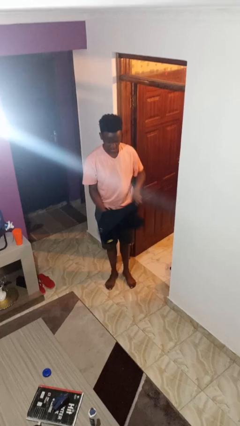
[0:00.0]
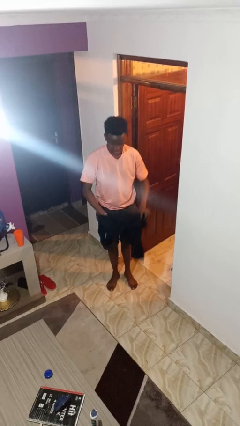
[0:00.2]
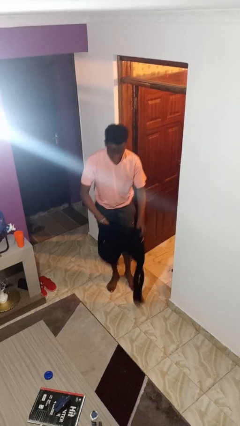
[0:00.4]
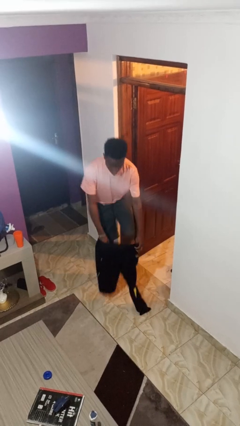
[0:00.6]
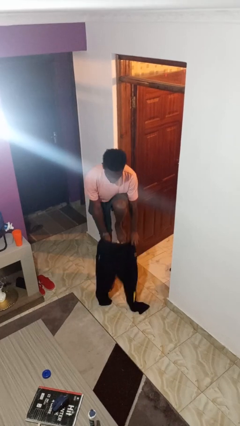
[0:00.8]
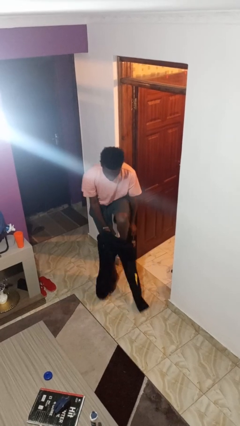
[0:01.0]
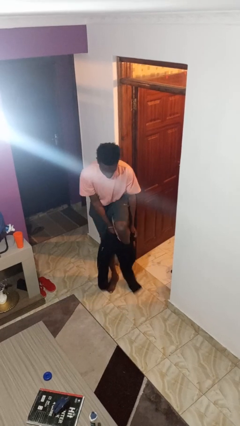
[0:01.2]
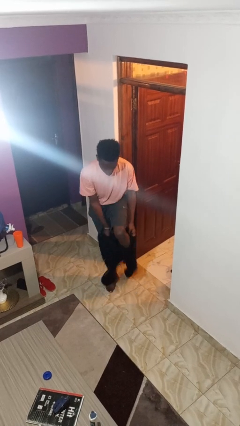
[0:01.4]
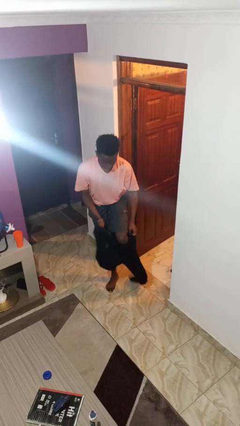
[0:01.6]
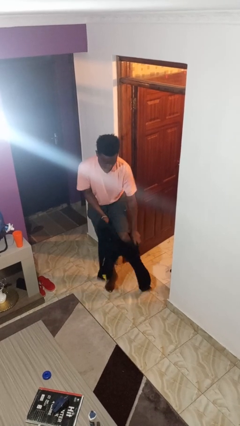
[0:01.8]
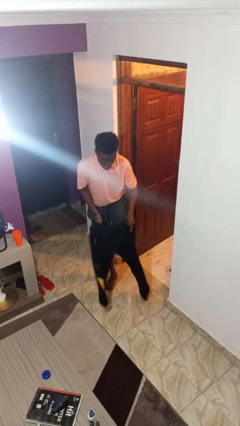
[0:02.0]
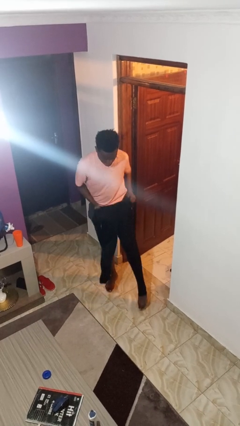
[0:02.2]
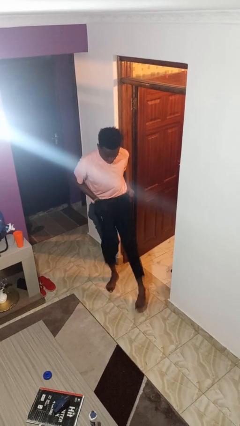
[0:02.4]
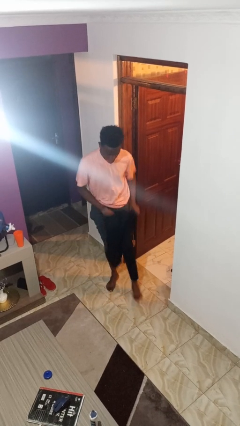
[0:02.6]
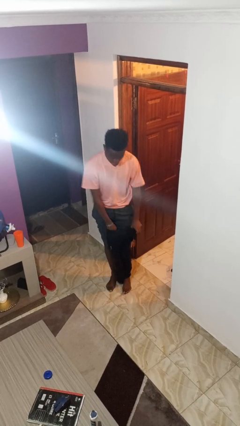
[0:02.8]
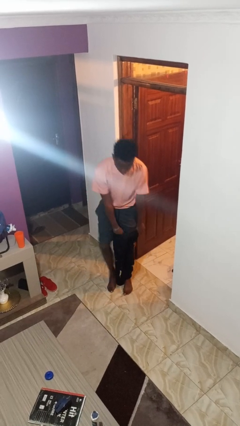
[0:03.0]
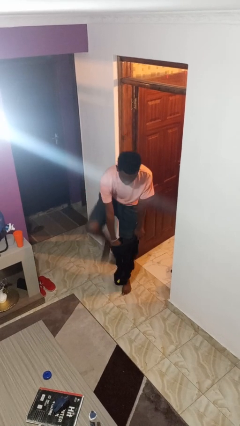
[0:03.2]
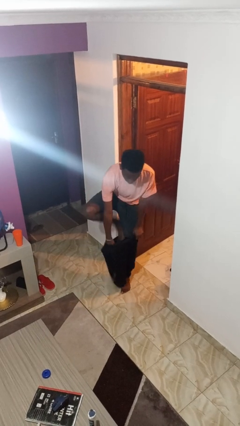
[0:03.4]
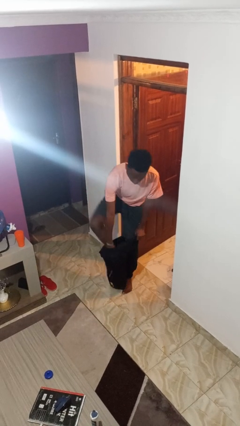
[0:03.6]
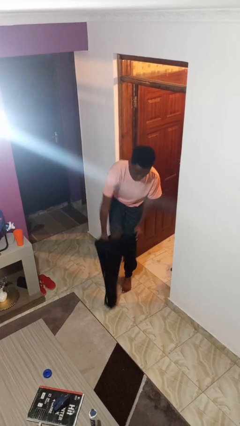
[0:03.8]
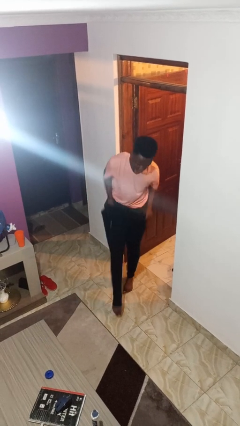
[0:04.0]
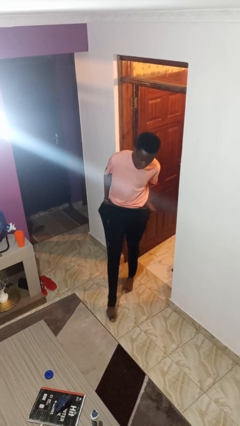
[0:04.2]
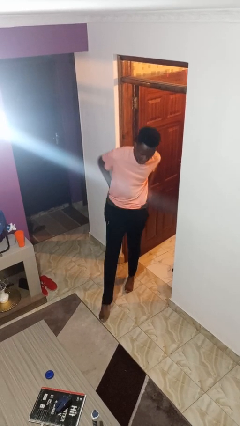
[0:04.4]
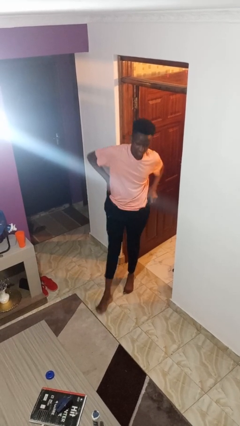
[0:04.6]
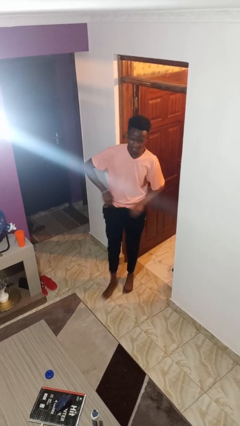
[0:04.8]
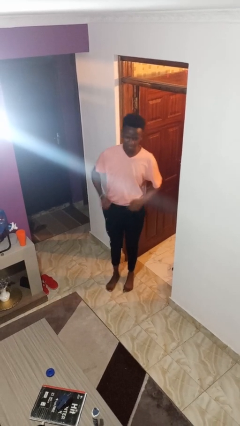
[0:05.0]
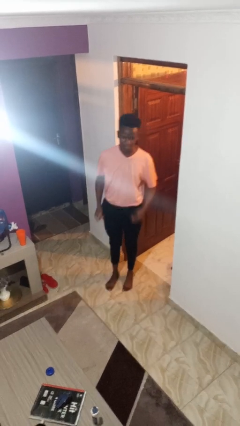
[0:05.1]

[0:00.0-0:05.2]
person puts on pants

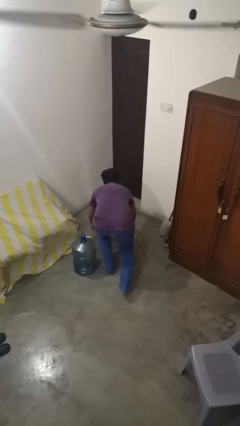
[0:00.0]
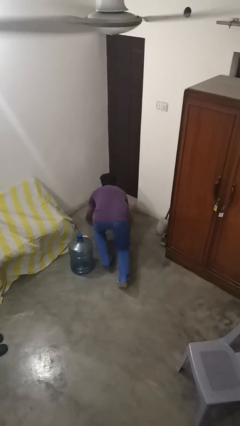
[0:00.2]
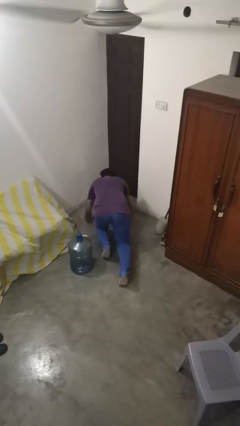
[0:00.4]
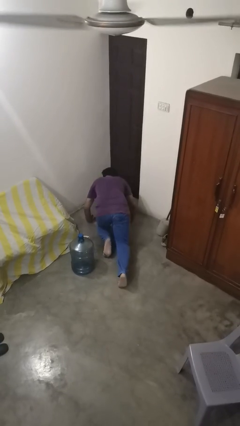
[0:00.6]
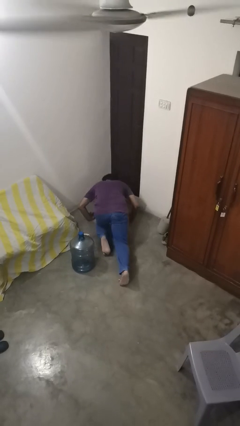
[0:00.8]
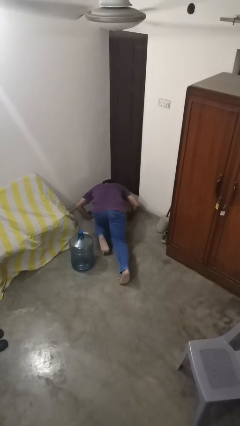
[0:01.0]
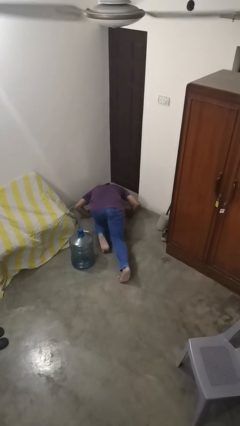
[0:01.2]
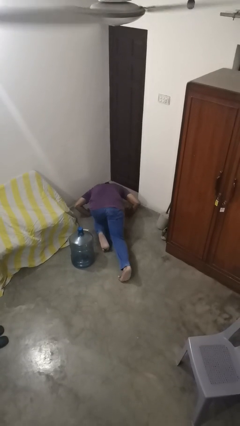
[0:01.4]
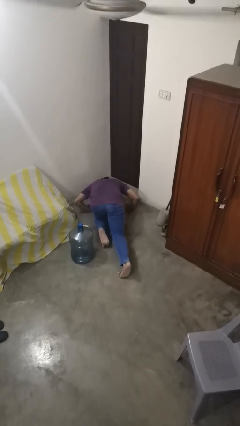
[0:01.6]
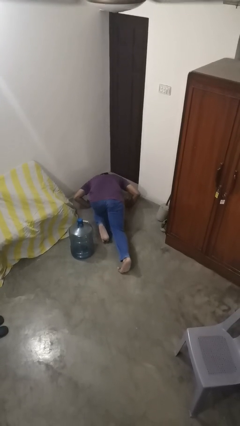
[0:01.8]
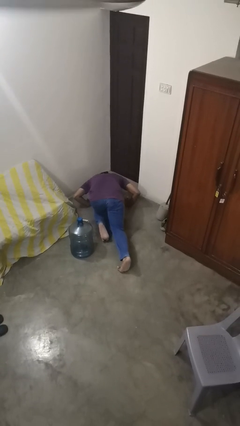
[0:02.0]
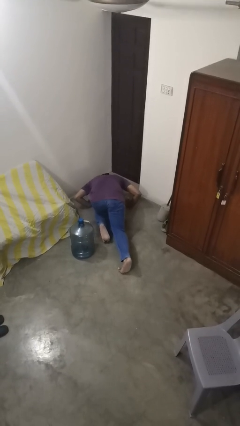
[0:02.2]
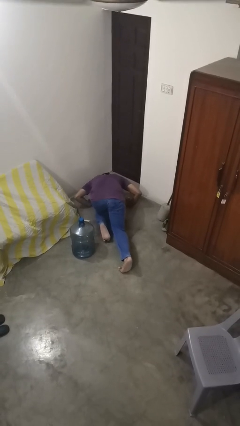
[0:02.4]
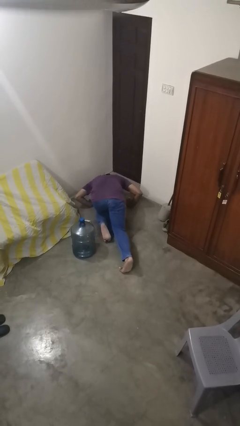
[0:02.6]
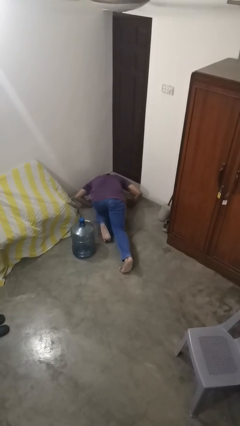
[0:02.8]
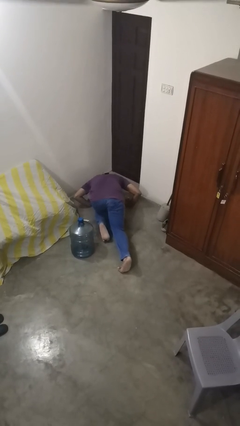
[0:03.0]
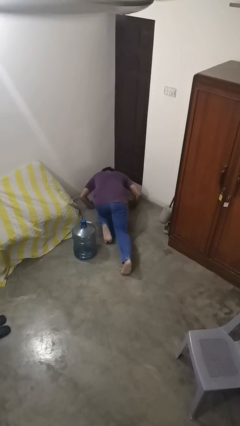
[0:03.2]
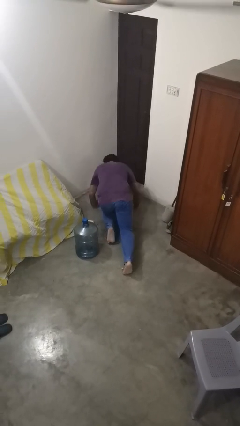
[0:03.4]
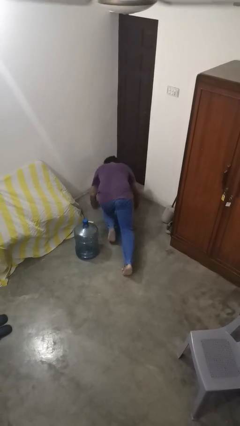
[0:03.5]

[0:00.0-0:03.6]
person lies down on floor

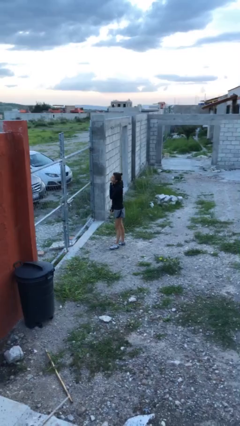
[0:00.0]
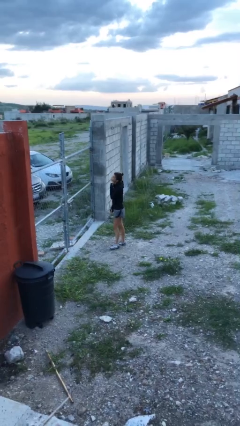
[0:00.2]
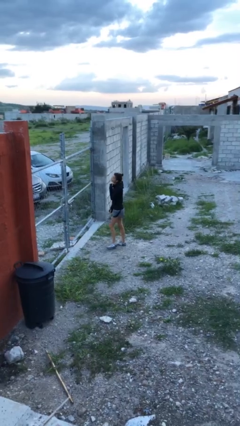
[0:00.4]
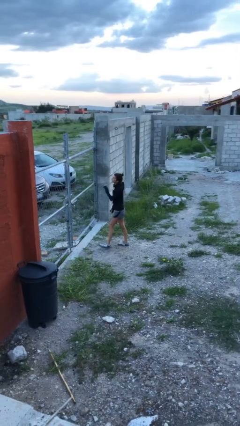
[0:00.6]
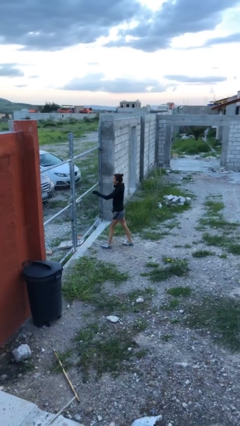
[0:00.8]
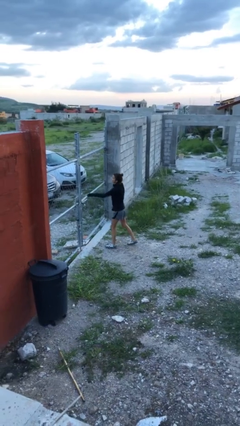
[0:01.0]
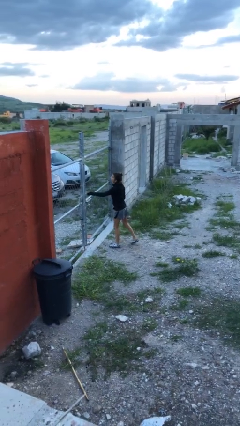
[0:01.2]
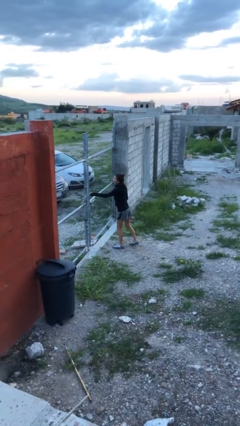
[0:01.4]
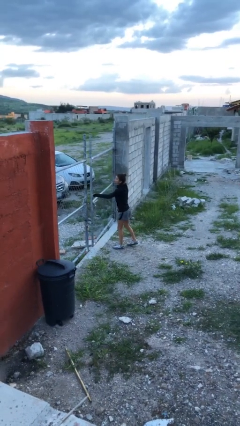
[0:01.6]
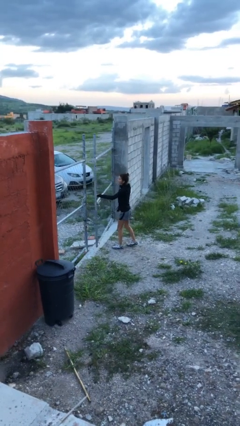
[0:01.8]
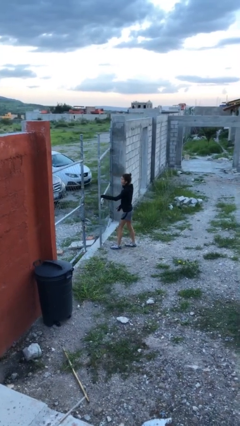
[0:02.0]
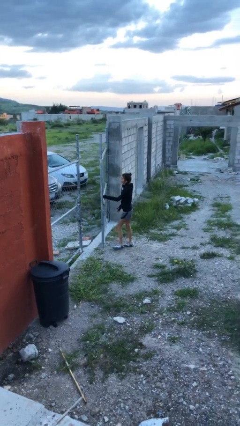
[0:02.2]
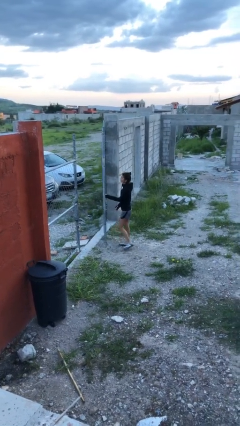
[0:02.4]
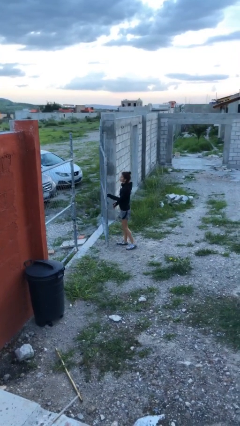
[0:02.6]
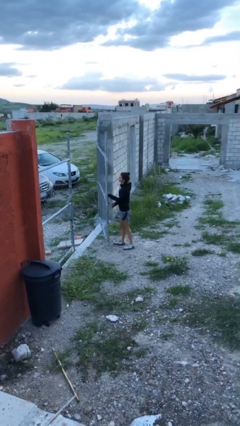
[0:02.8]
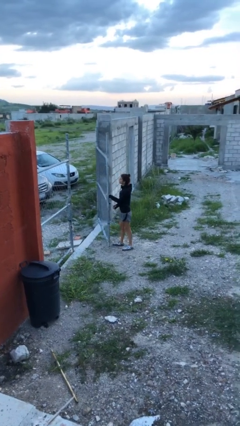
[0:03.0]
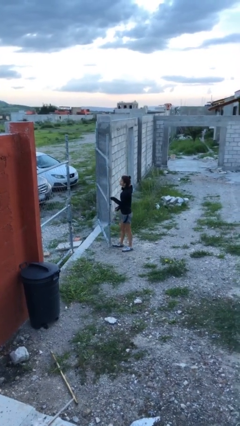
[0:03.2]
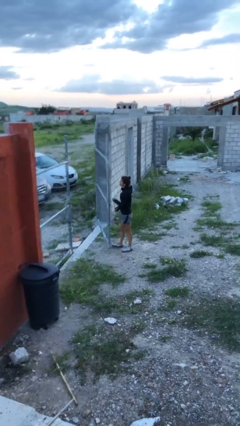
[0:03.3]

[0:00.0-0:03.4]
person opens gate

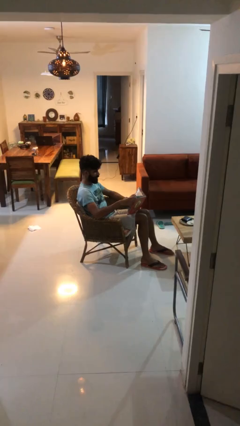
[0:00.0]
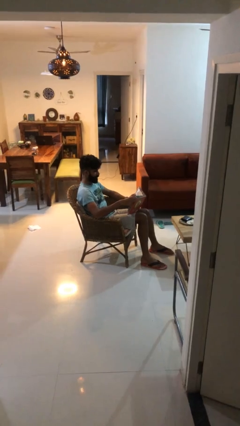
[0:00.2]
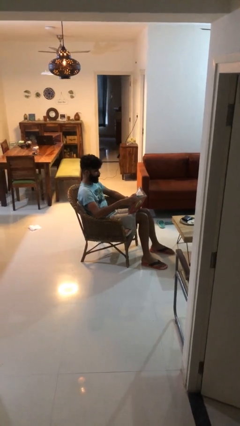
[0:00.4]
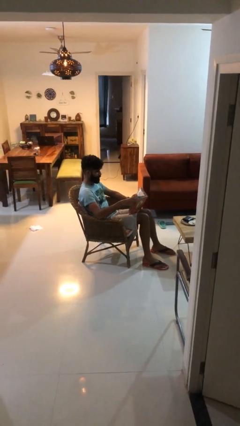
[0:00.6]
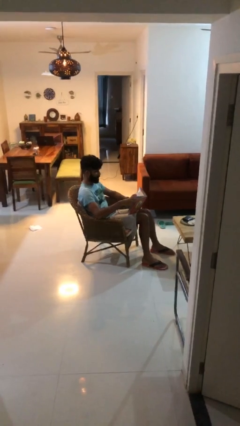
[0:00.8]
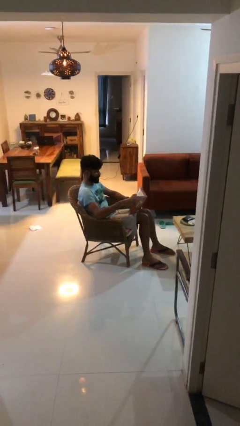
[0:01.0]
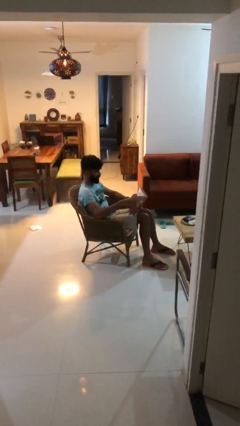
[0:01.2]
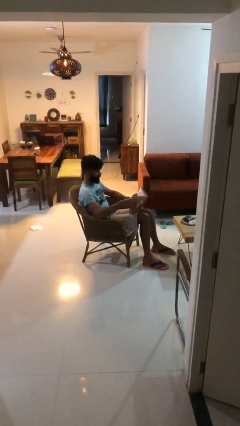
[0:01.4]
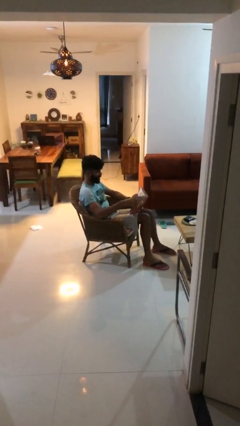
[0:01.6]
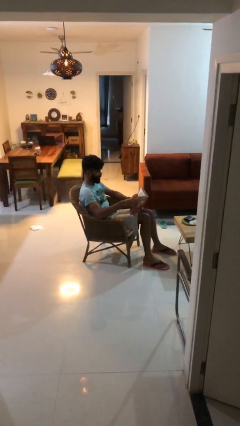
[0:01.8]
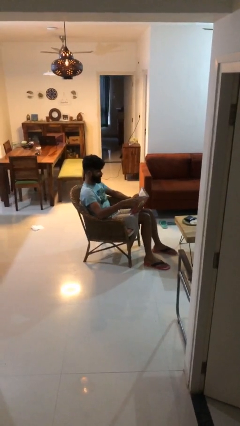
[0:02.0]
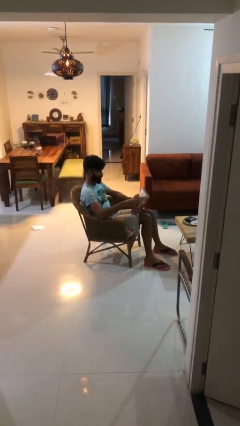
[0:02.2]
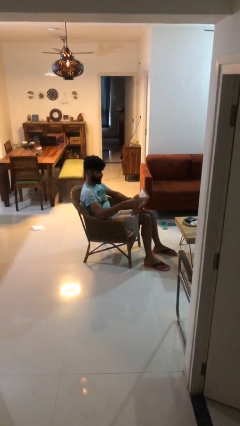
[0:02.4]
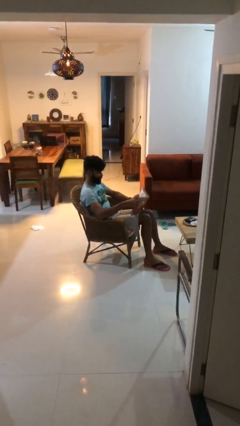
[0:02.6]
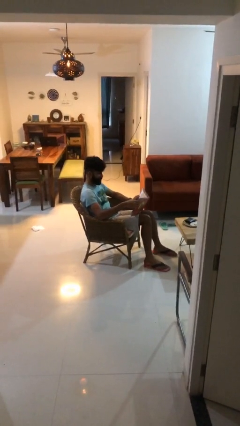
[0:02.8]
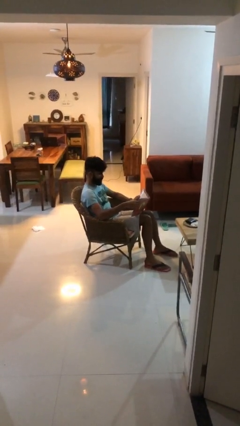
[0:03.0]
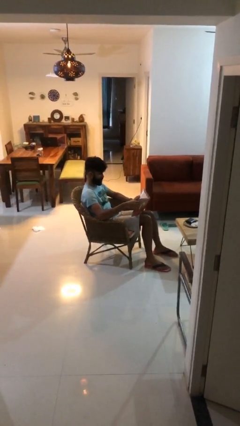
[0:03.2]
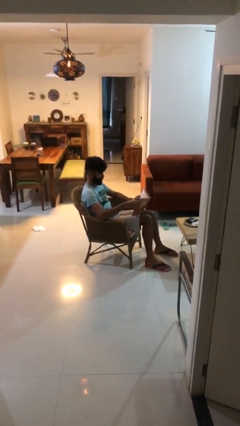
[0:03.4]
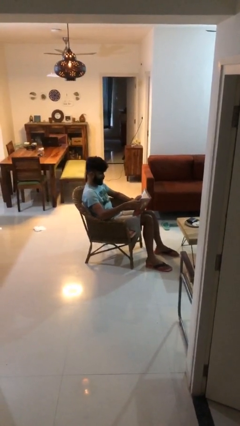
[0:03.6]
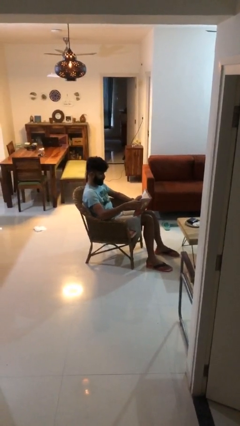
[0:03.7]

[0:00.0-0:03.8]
person reads document

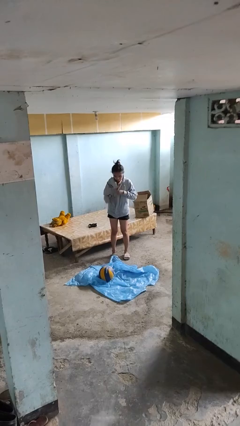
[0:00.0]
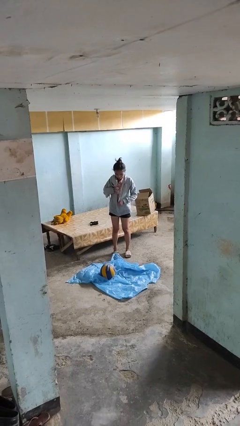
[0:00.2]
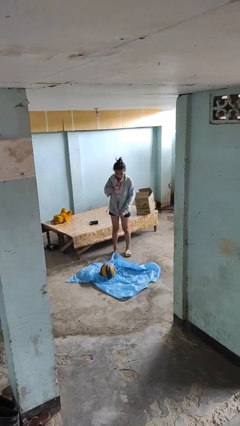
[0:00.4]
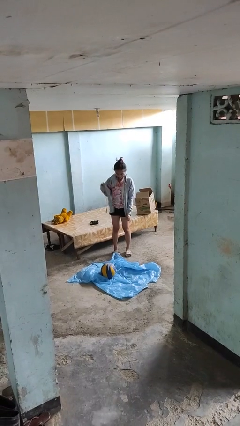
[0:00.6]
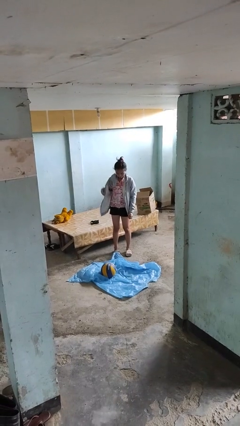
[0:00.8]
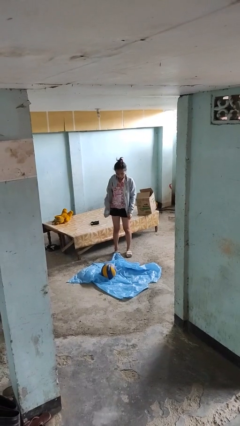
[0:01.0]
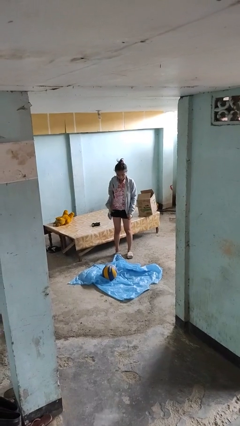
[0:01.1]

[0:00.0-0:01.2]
person unzips jacket

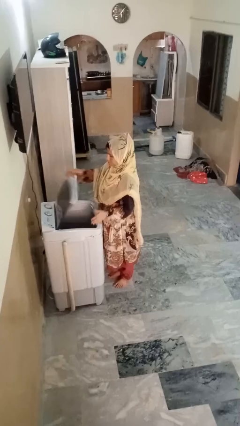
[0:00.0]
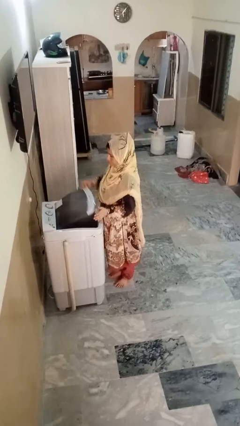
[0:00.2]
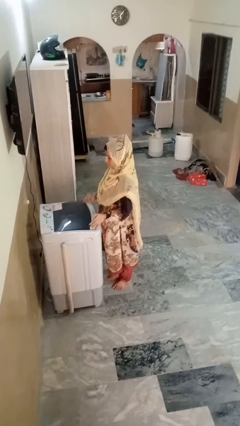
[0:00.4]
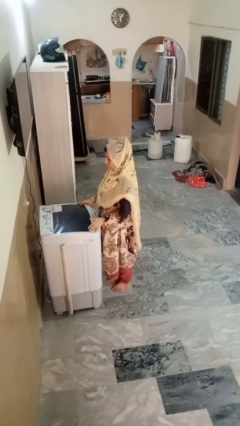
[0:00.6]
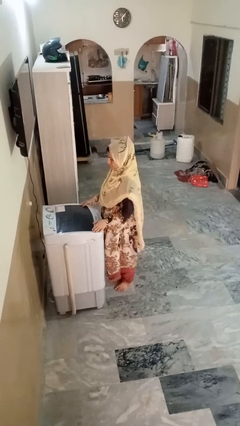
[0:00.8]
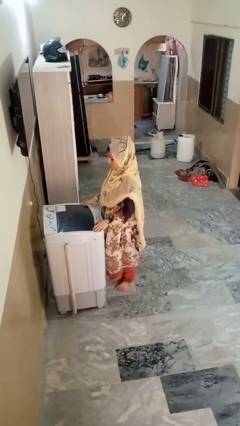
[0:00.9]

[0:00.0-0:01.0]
person closes clothes washer
